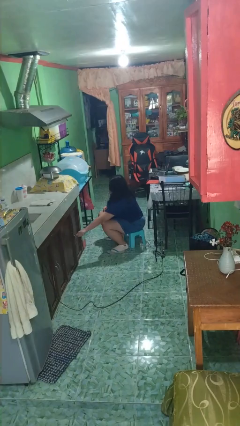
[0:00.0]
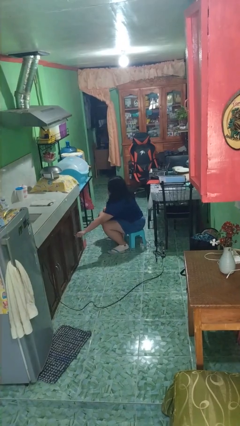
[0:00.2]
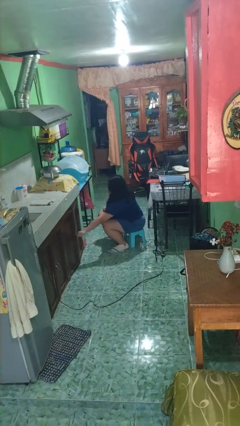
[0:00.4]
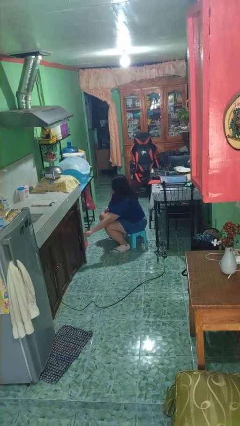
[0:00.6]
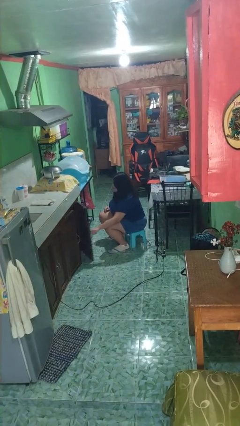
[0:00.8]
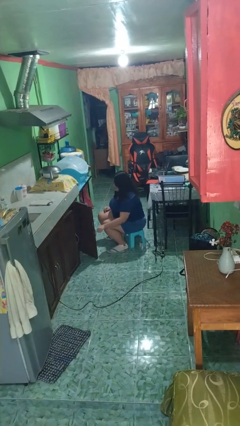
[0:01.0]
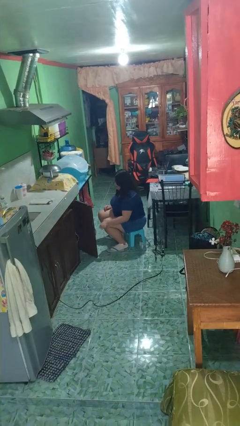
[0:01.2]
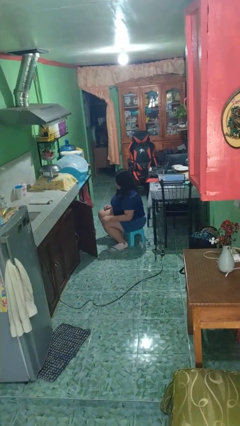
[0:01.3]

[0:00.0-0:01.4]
person opens cabinet

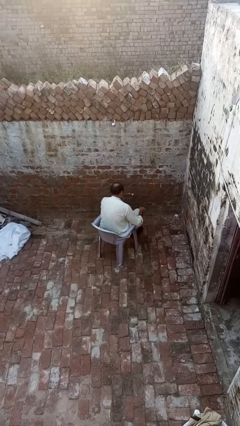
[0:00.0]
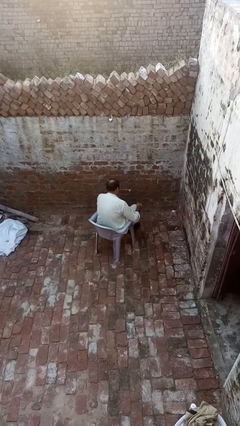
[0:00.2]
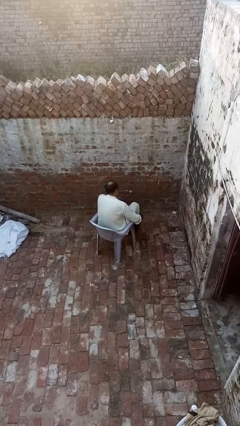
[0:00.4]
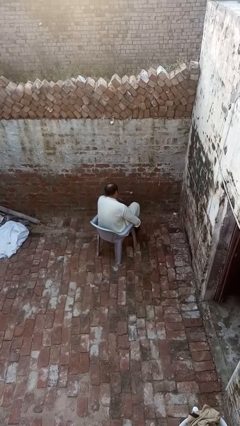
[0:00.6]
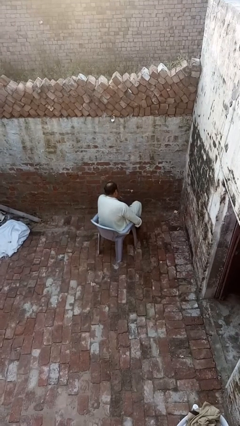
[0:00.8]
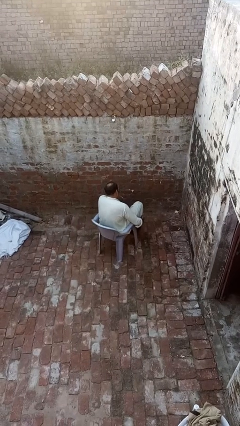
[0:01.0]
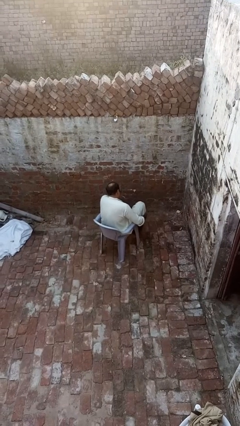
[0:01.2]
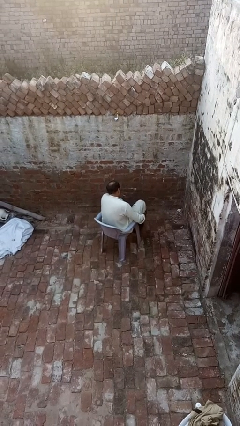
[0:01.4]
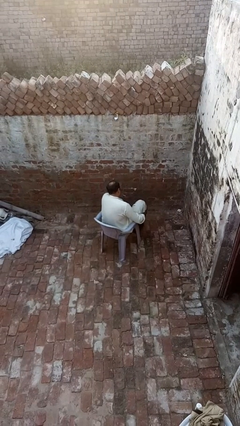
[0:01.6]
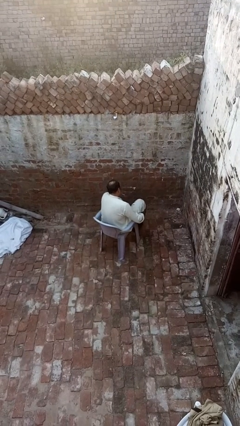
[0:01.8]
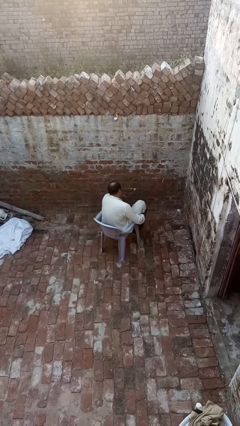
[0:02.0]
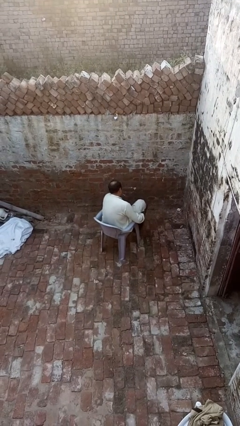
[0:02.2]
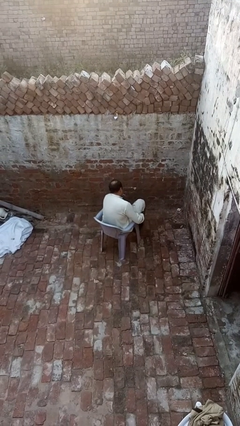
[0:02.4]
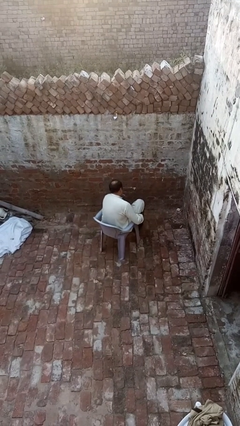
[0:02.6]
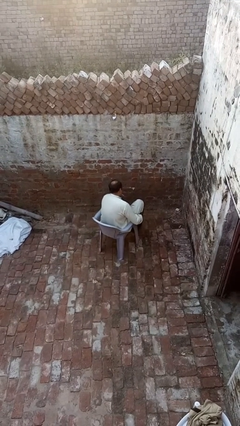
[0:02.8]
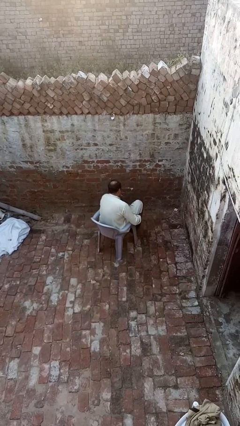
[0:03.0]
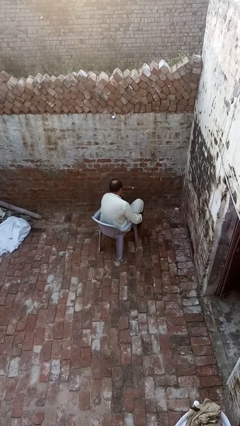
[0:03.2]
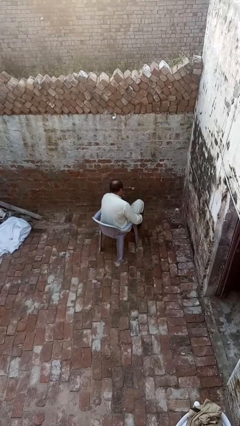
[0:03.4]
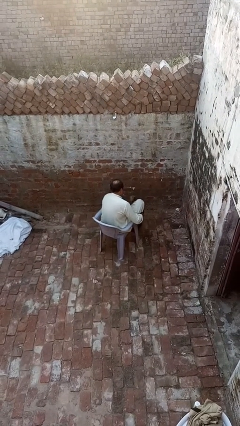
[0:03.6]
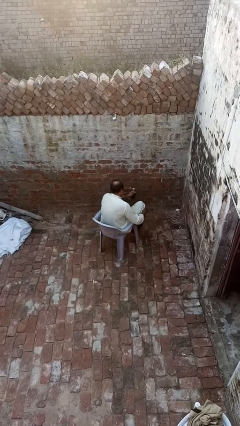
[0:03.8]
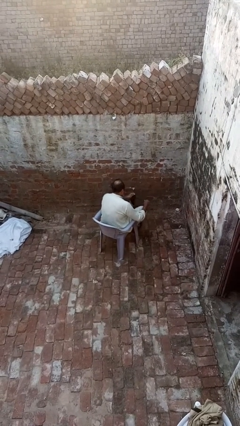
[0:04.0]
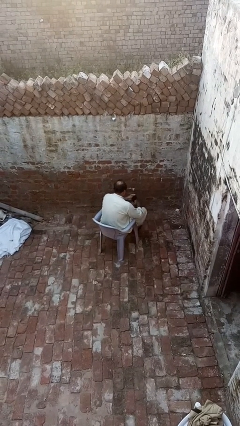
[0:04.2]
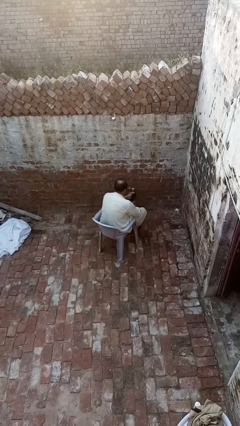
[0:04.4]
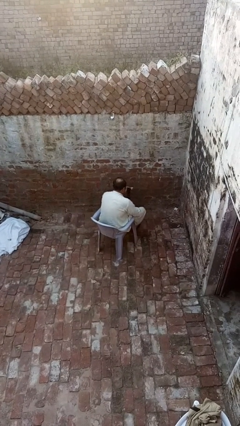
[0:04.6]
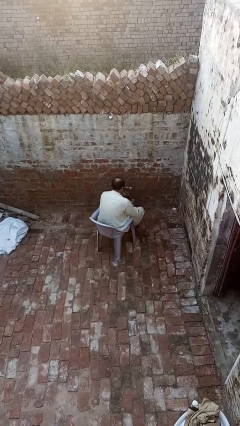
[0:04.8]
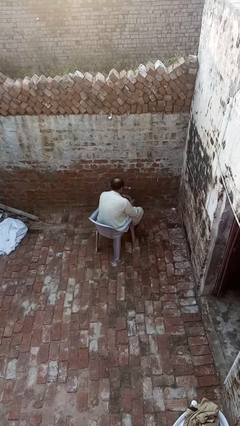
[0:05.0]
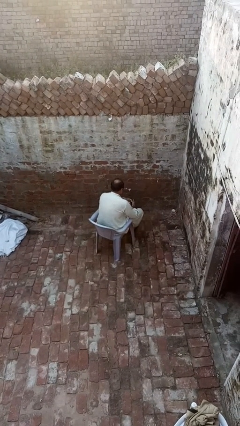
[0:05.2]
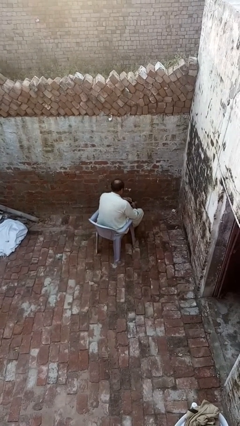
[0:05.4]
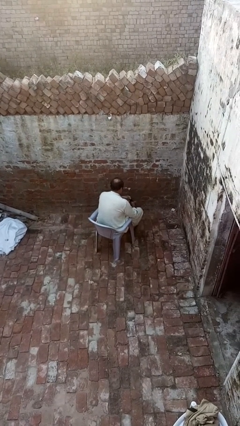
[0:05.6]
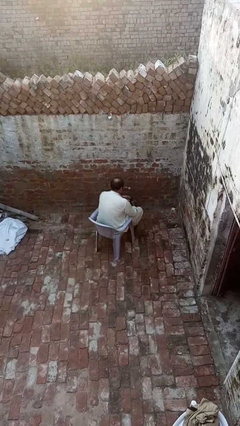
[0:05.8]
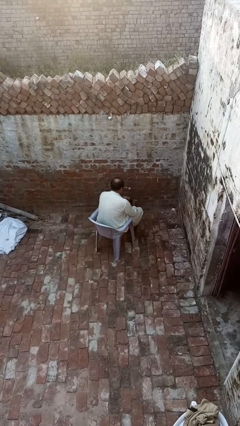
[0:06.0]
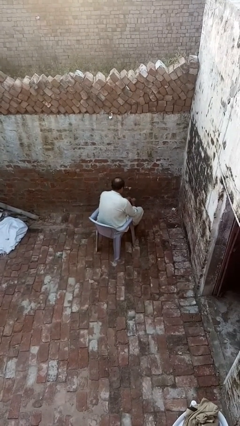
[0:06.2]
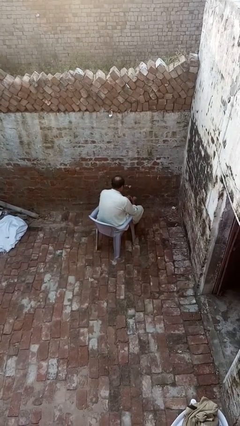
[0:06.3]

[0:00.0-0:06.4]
person takes off socks

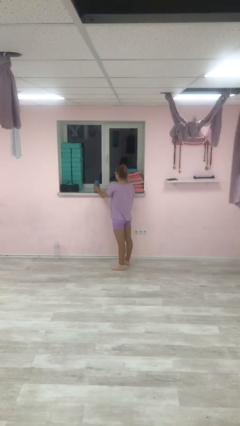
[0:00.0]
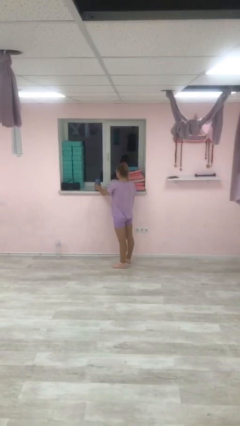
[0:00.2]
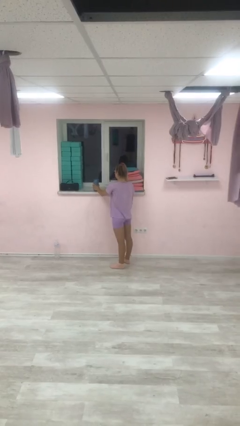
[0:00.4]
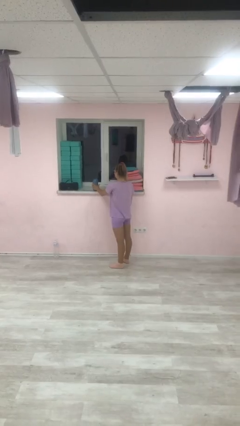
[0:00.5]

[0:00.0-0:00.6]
person puts down object on countertop

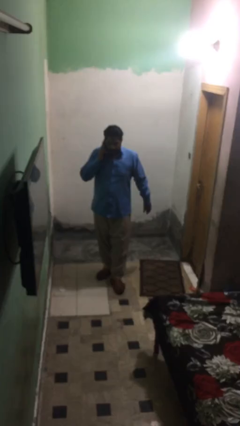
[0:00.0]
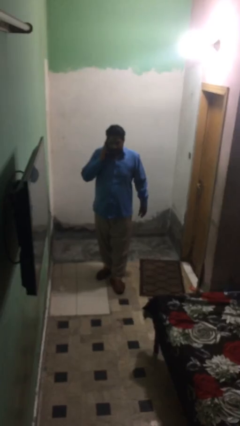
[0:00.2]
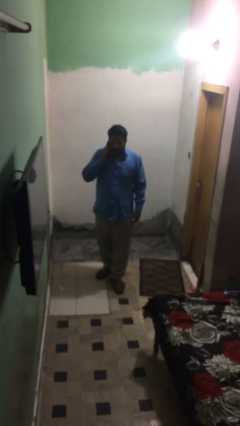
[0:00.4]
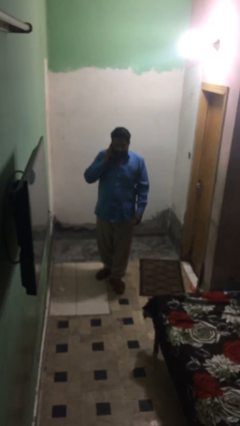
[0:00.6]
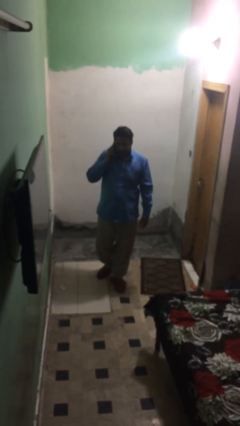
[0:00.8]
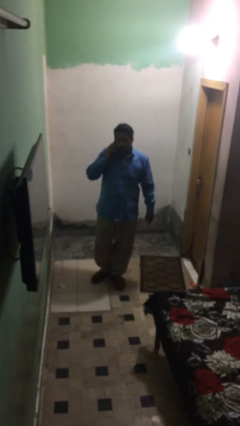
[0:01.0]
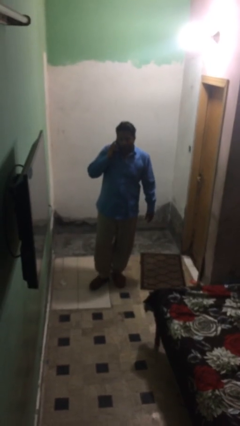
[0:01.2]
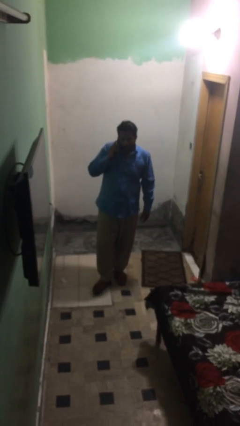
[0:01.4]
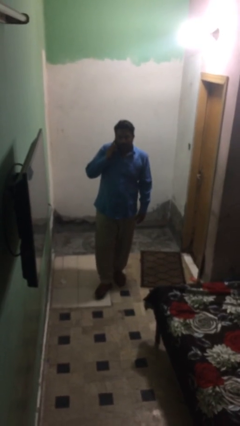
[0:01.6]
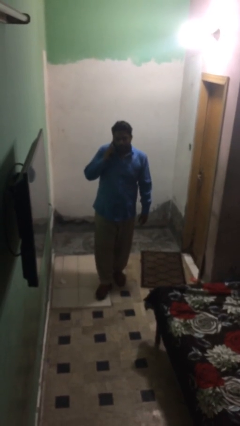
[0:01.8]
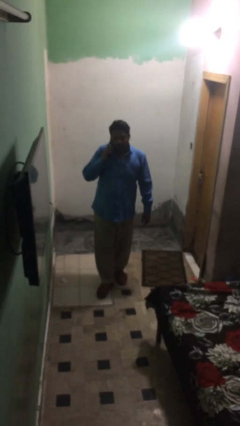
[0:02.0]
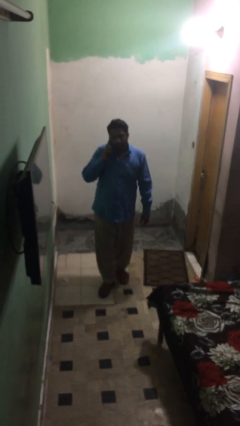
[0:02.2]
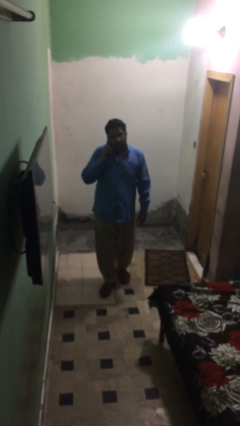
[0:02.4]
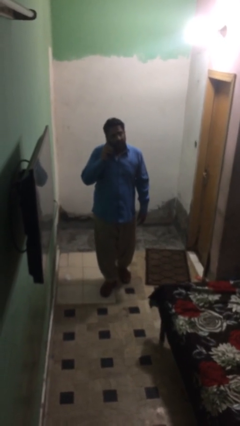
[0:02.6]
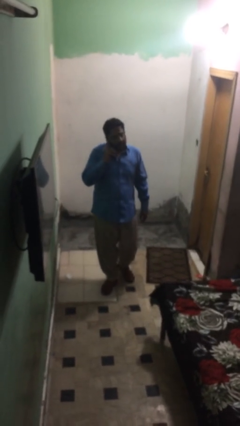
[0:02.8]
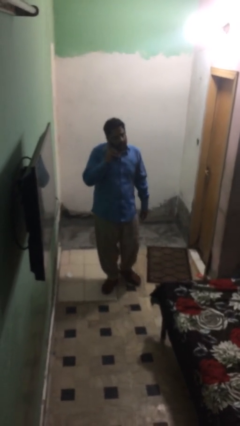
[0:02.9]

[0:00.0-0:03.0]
person talks on phone

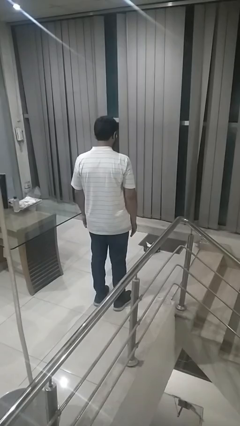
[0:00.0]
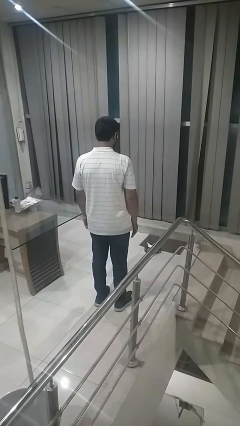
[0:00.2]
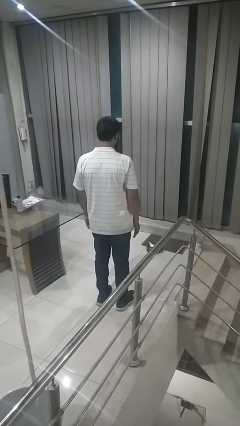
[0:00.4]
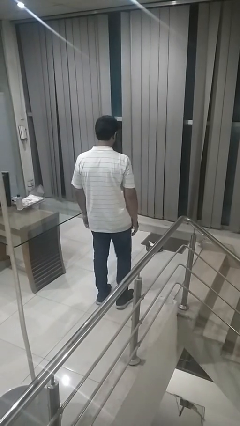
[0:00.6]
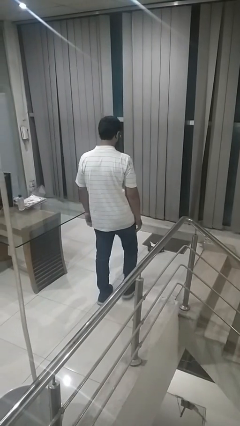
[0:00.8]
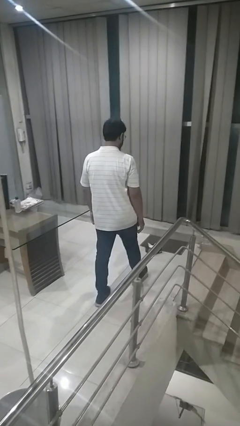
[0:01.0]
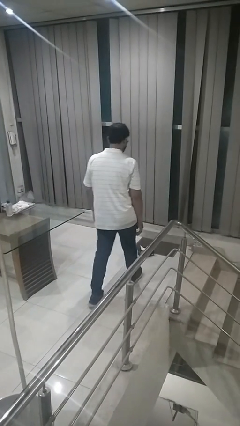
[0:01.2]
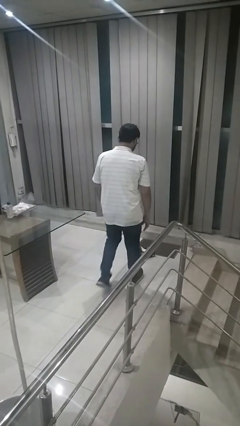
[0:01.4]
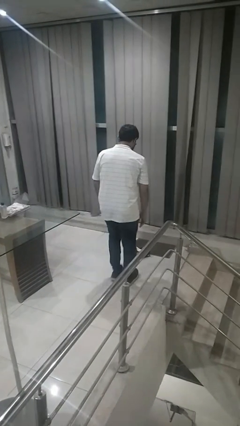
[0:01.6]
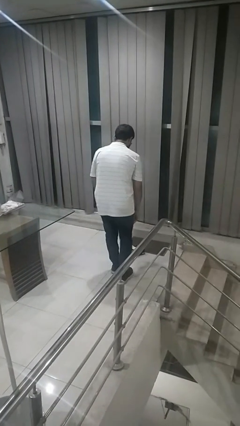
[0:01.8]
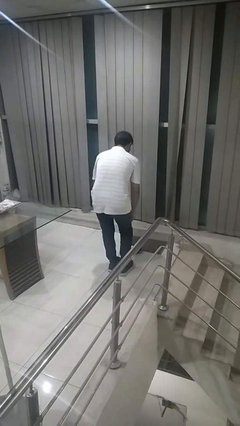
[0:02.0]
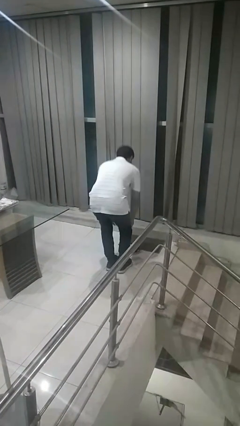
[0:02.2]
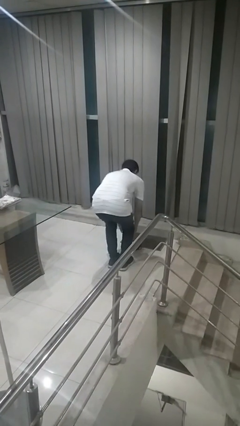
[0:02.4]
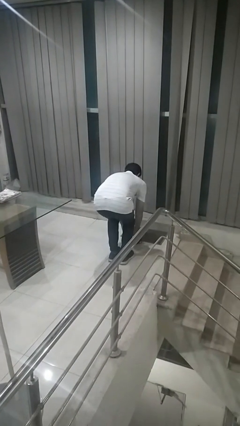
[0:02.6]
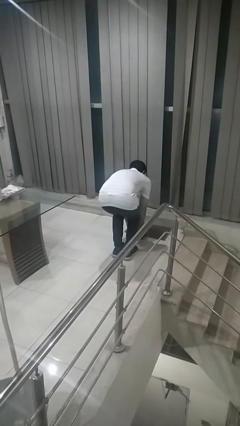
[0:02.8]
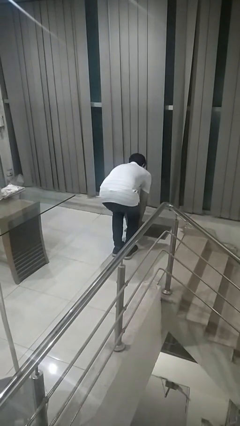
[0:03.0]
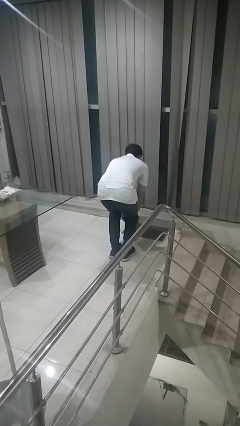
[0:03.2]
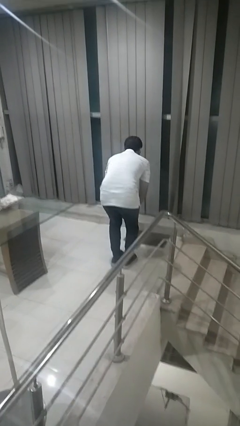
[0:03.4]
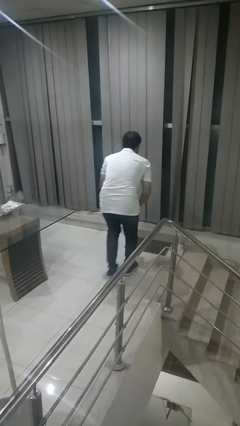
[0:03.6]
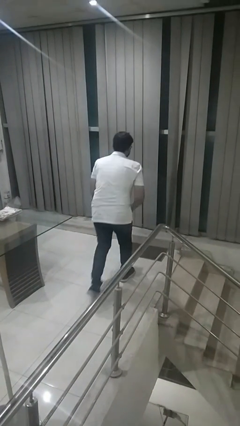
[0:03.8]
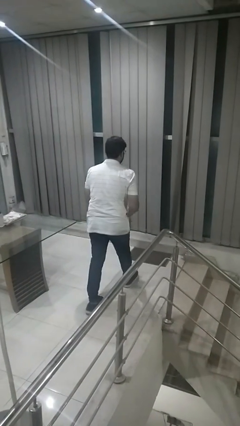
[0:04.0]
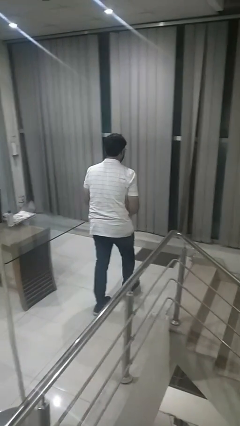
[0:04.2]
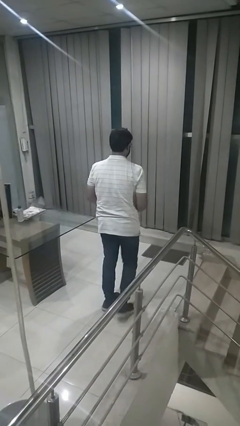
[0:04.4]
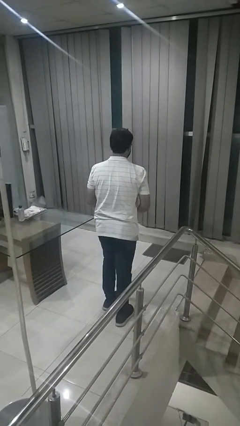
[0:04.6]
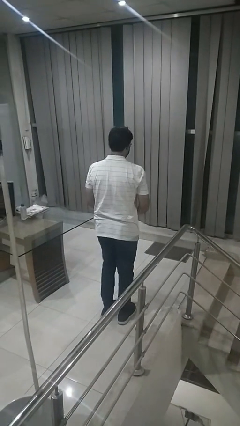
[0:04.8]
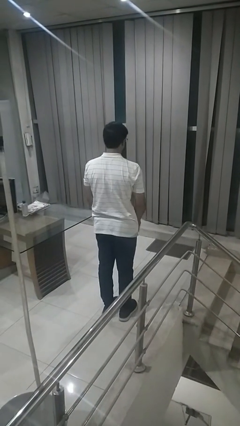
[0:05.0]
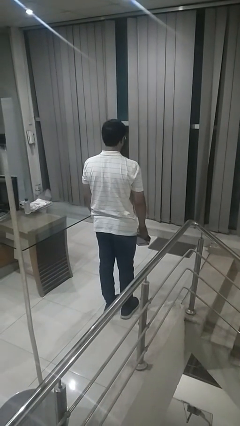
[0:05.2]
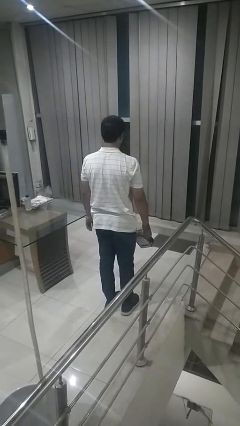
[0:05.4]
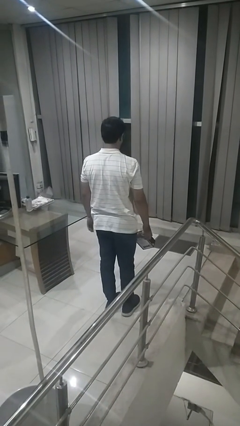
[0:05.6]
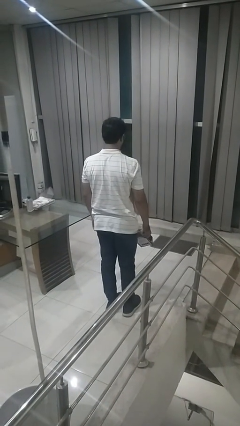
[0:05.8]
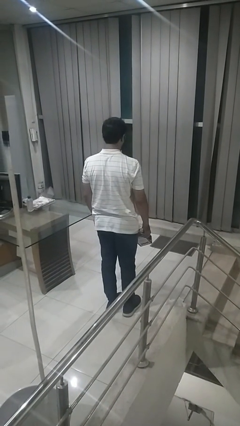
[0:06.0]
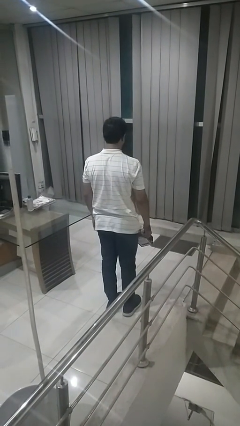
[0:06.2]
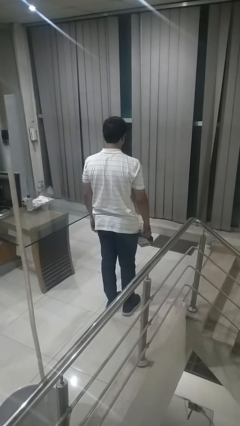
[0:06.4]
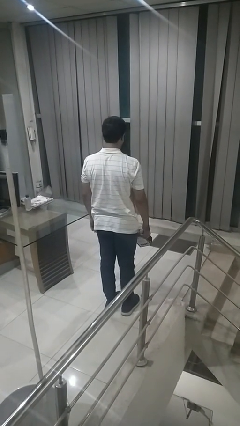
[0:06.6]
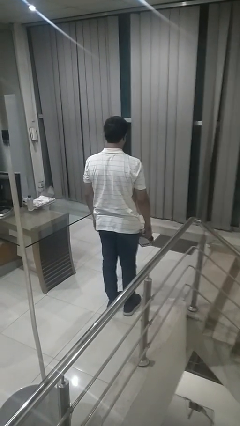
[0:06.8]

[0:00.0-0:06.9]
person picks up object from floor
